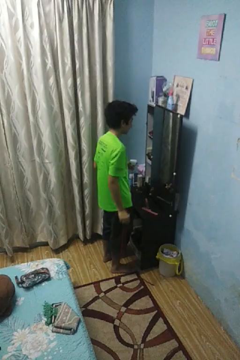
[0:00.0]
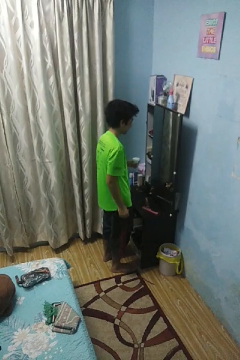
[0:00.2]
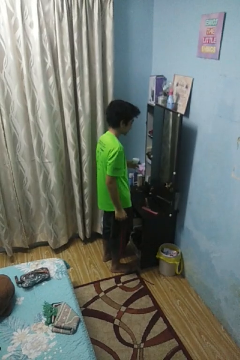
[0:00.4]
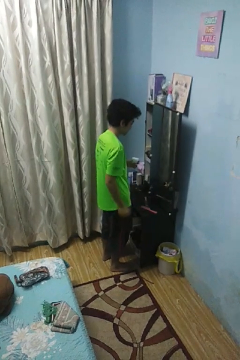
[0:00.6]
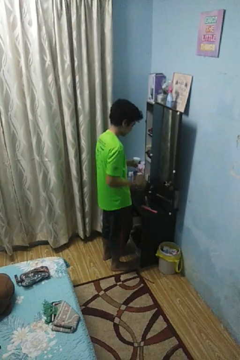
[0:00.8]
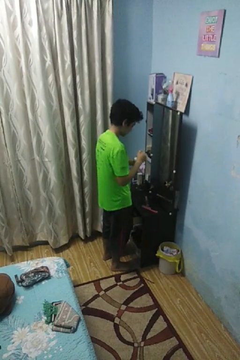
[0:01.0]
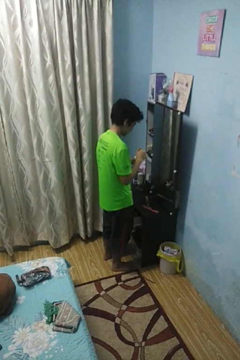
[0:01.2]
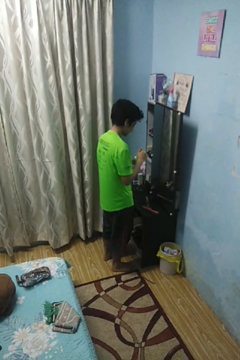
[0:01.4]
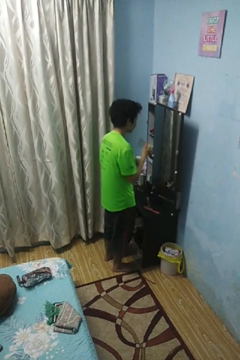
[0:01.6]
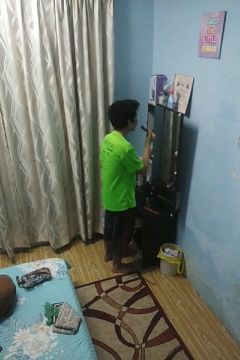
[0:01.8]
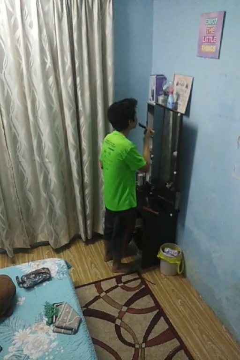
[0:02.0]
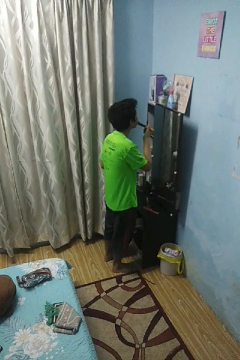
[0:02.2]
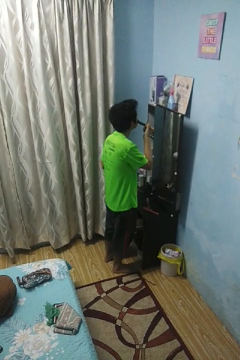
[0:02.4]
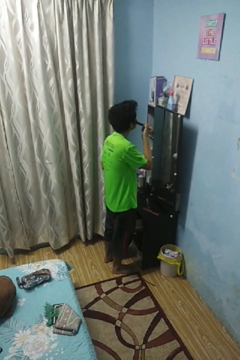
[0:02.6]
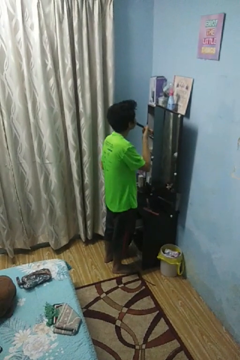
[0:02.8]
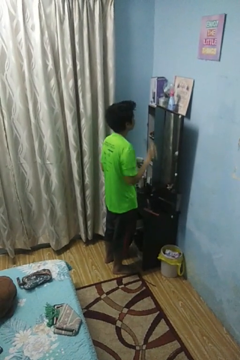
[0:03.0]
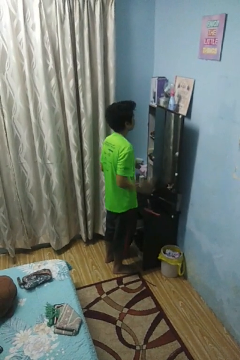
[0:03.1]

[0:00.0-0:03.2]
person applies foundation makeup

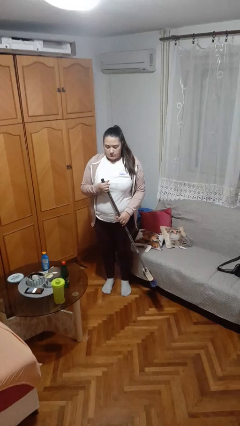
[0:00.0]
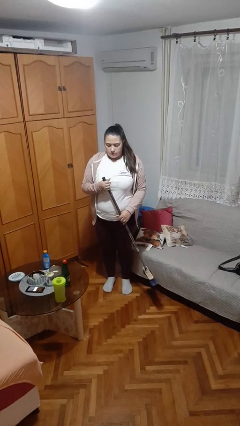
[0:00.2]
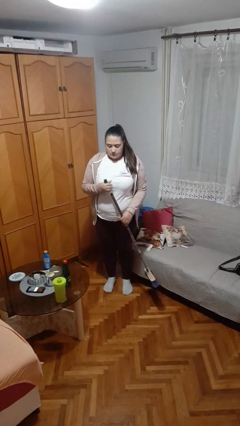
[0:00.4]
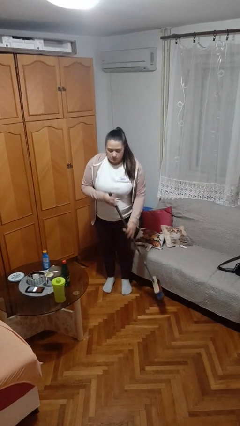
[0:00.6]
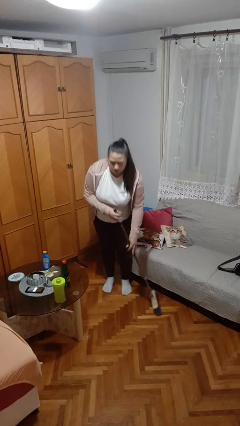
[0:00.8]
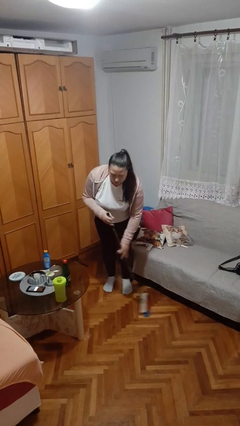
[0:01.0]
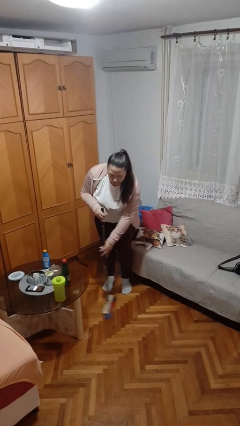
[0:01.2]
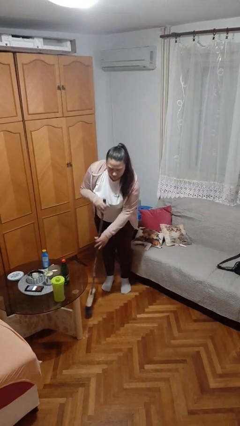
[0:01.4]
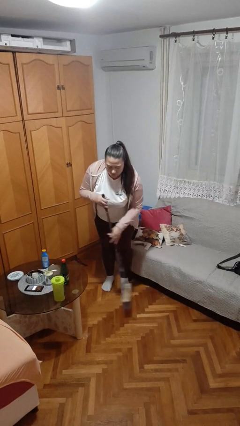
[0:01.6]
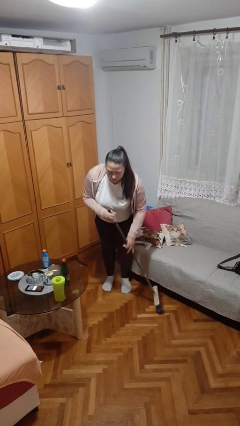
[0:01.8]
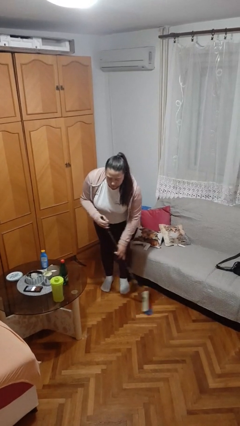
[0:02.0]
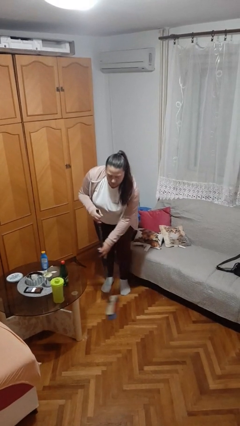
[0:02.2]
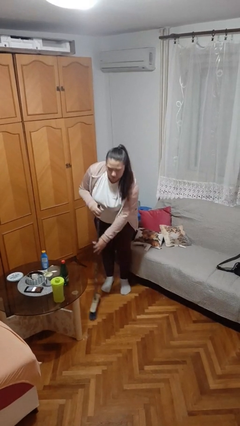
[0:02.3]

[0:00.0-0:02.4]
person sweeps floor

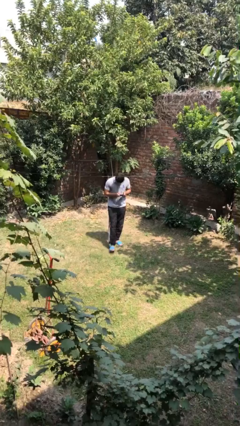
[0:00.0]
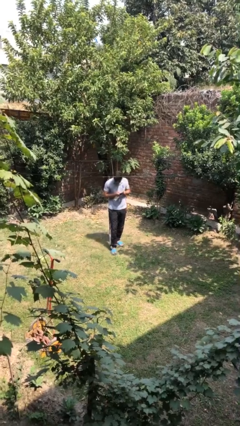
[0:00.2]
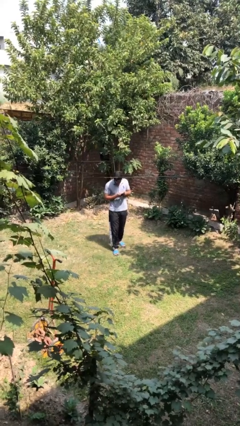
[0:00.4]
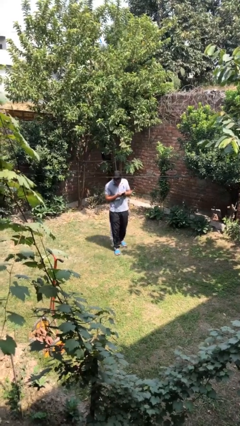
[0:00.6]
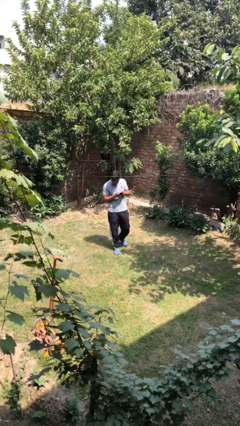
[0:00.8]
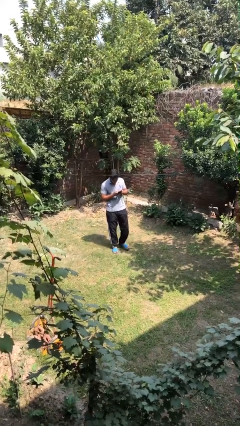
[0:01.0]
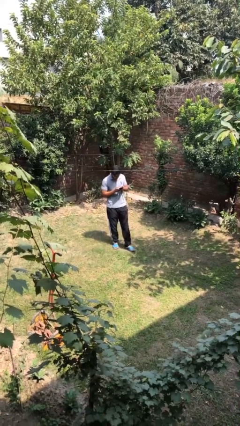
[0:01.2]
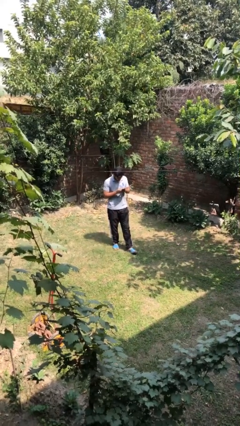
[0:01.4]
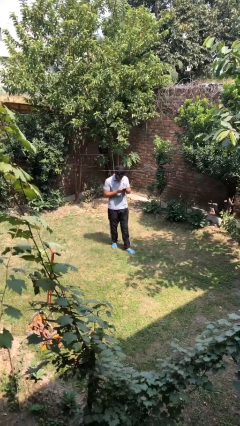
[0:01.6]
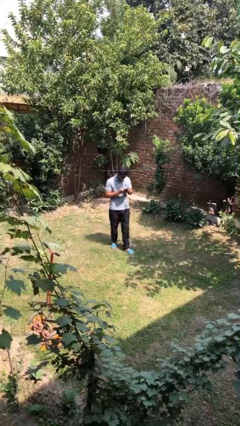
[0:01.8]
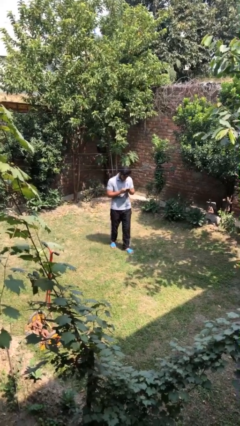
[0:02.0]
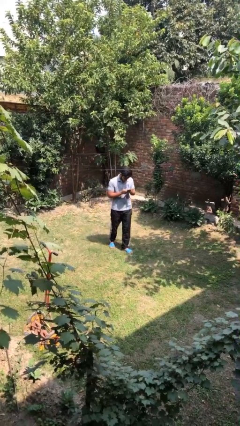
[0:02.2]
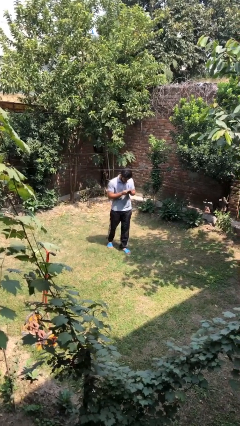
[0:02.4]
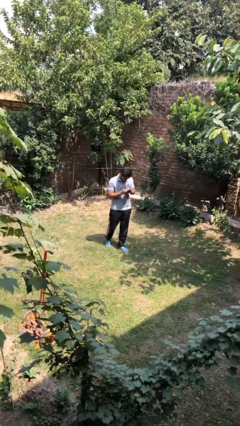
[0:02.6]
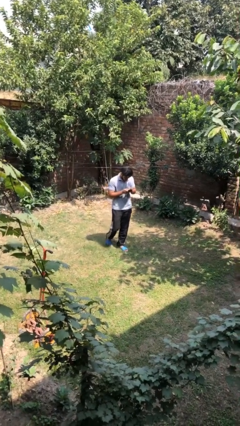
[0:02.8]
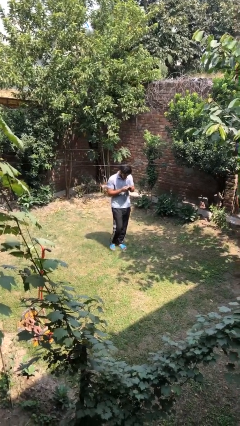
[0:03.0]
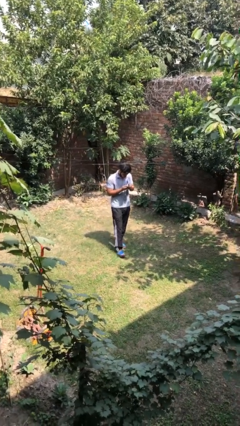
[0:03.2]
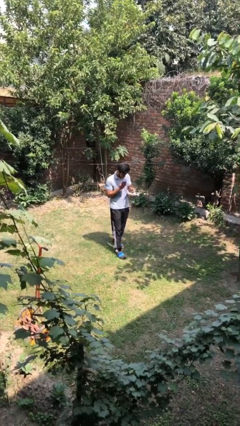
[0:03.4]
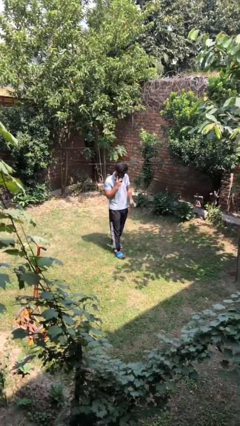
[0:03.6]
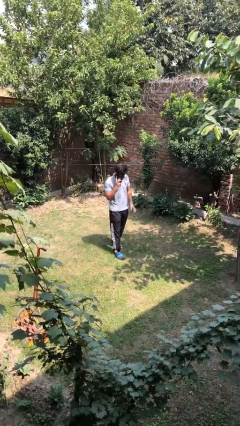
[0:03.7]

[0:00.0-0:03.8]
person texts on phone

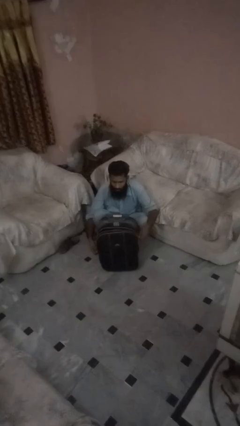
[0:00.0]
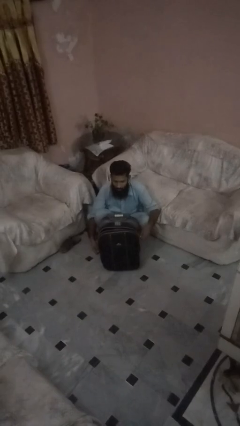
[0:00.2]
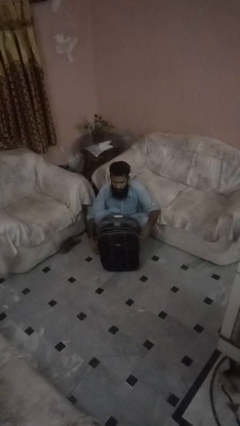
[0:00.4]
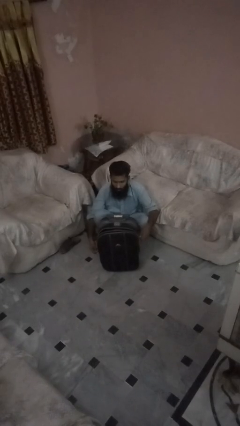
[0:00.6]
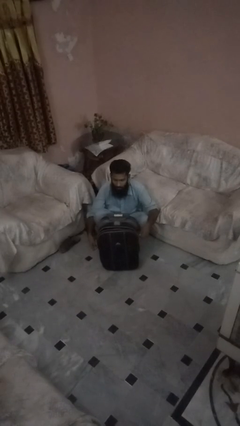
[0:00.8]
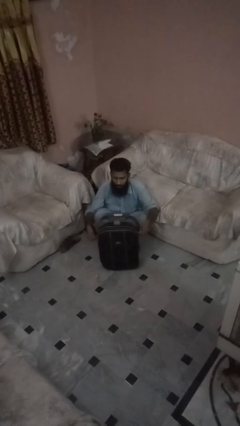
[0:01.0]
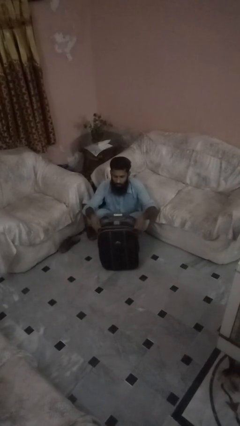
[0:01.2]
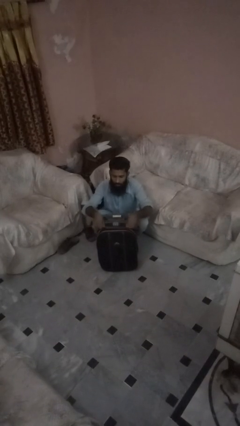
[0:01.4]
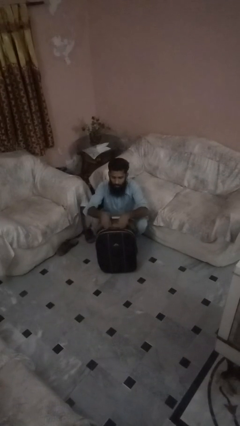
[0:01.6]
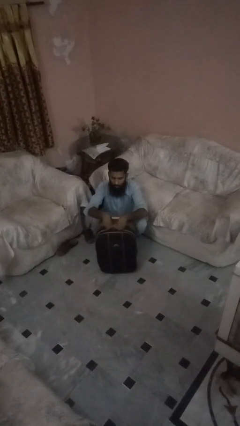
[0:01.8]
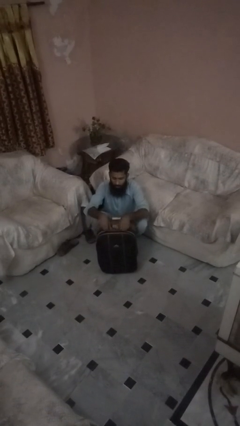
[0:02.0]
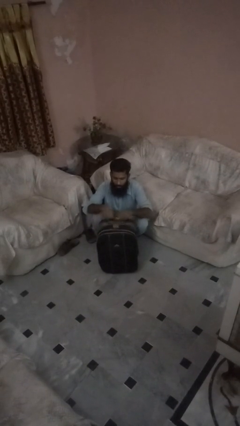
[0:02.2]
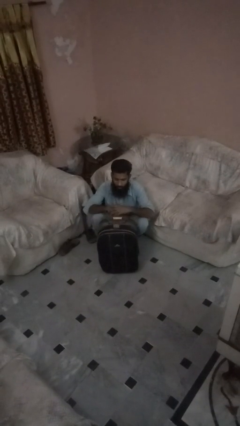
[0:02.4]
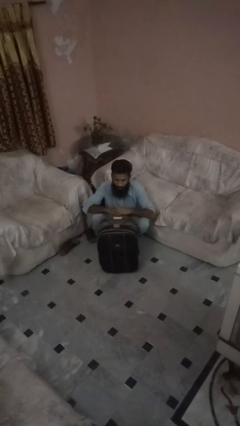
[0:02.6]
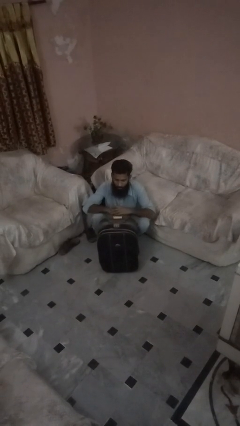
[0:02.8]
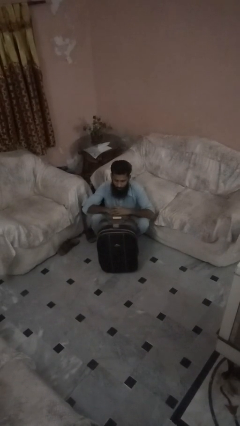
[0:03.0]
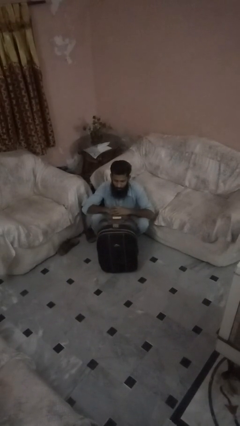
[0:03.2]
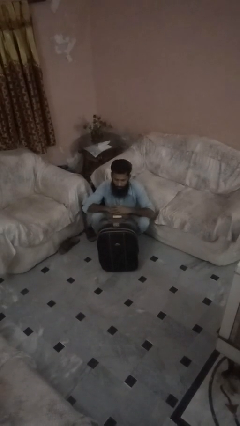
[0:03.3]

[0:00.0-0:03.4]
person closes suitcase

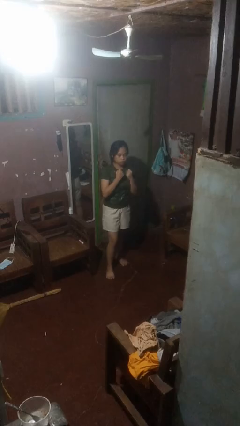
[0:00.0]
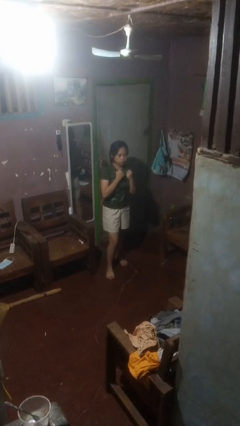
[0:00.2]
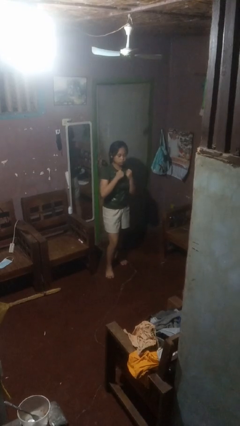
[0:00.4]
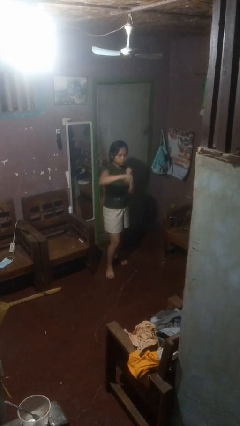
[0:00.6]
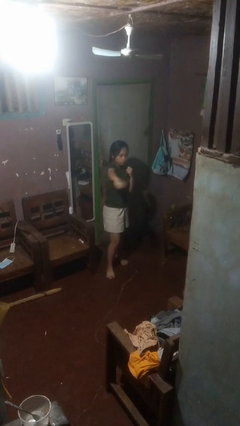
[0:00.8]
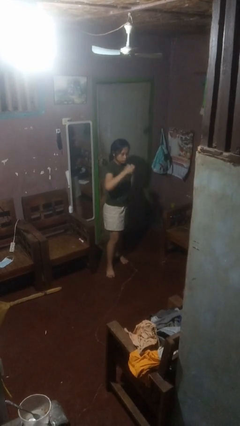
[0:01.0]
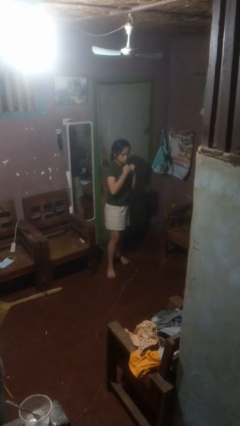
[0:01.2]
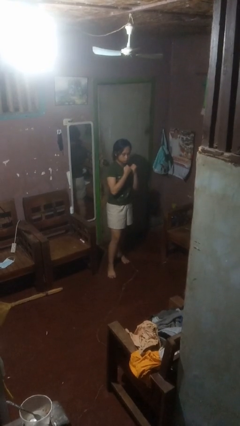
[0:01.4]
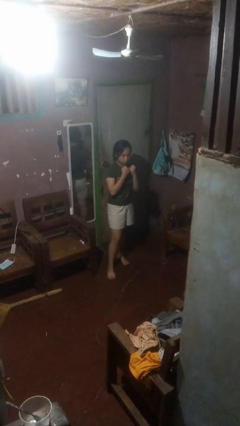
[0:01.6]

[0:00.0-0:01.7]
person punches

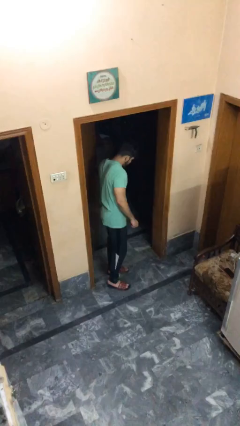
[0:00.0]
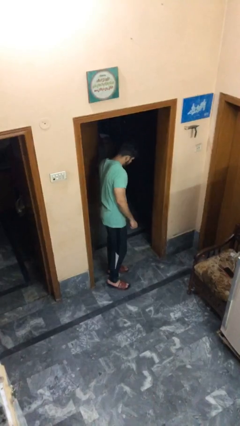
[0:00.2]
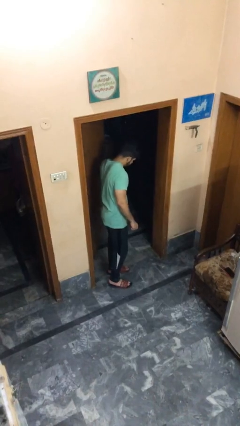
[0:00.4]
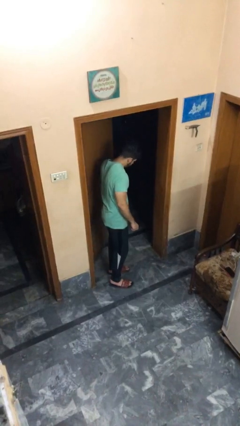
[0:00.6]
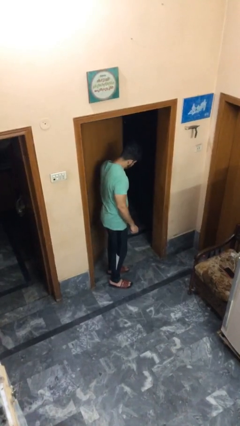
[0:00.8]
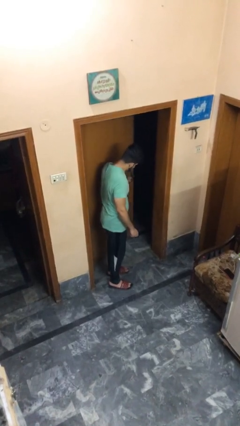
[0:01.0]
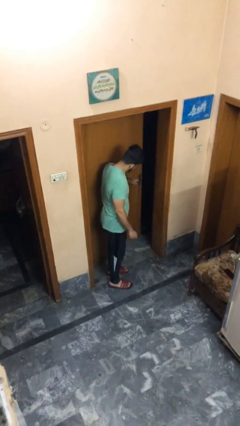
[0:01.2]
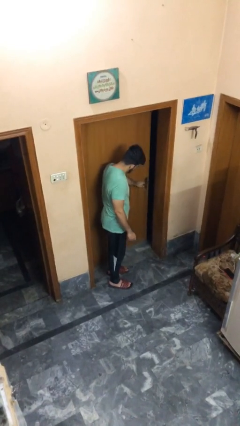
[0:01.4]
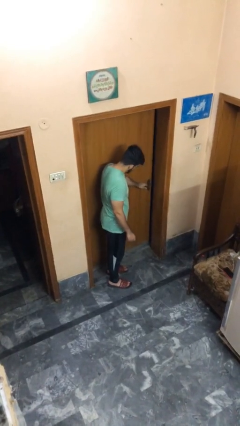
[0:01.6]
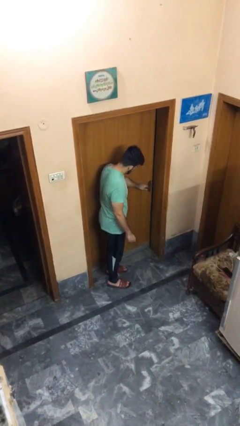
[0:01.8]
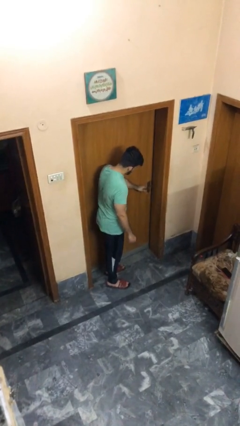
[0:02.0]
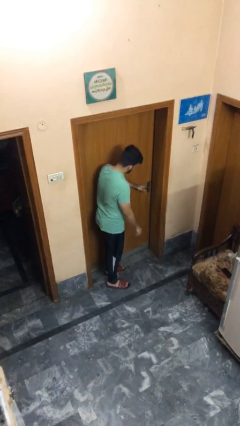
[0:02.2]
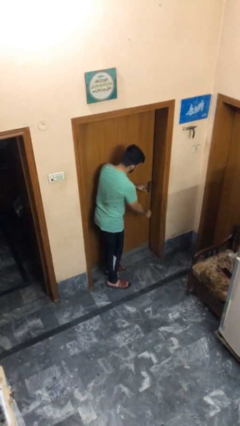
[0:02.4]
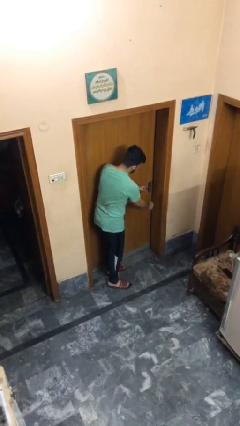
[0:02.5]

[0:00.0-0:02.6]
person closes facility door

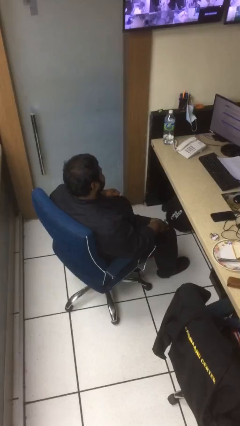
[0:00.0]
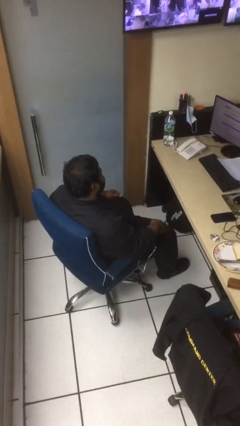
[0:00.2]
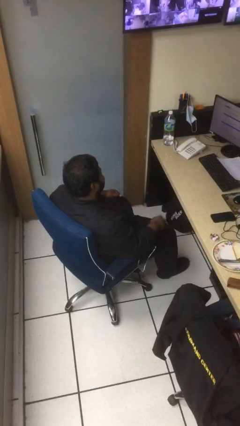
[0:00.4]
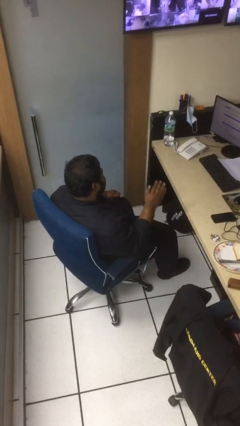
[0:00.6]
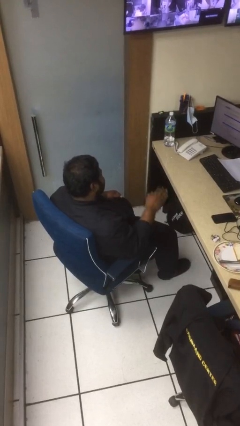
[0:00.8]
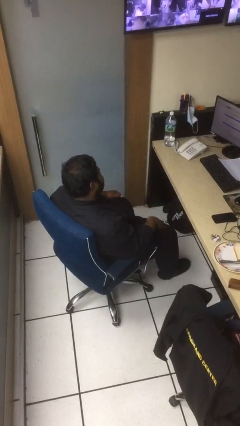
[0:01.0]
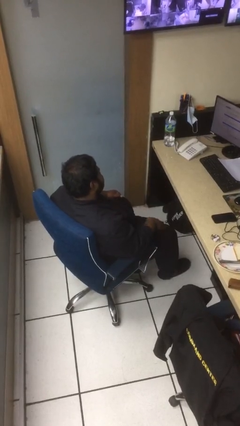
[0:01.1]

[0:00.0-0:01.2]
person slaps hands on thighs
